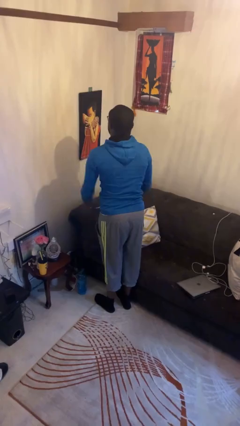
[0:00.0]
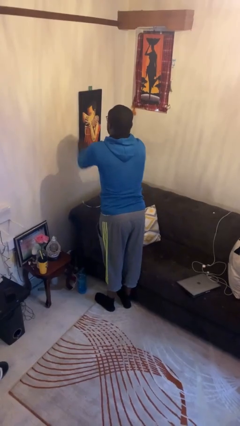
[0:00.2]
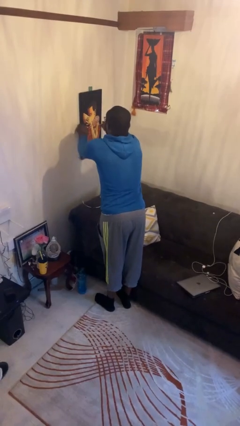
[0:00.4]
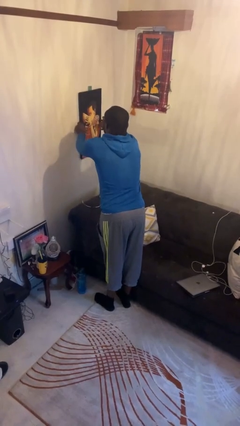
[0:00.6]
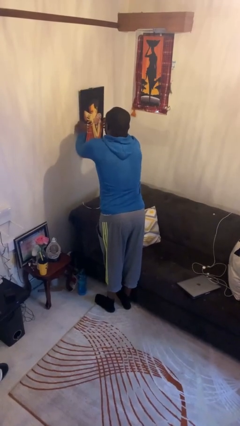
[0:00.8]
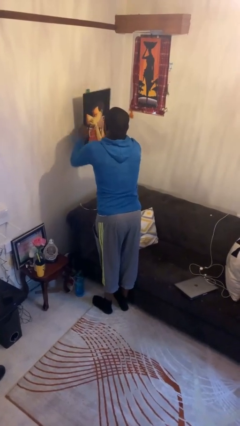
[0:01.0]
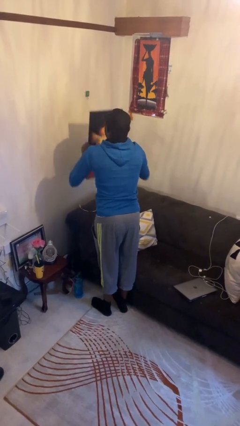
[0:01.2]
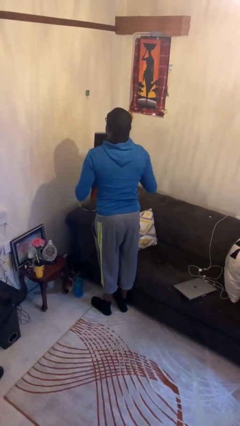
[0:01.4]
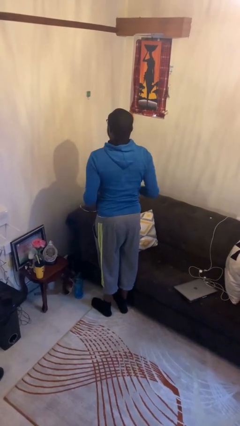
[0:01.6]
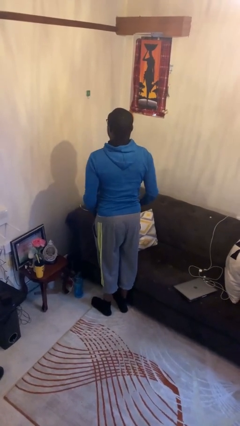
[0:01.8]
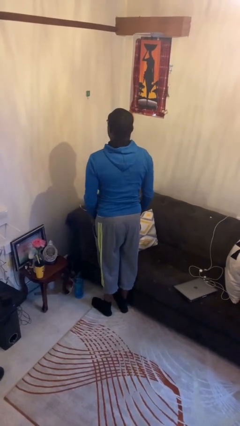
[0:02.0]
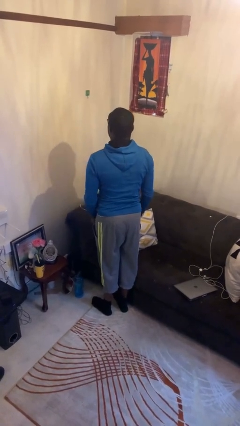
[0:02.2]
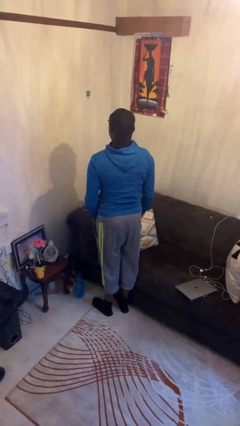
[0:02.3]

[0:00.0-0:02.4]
person takes down picture frame

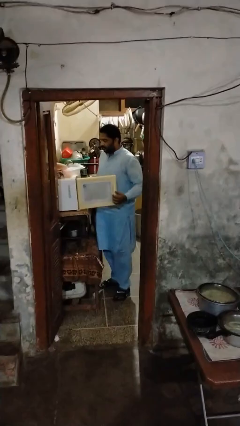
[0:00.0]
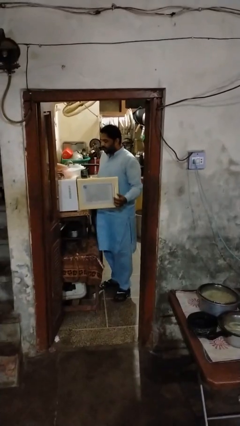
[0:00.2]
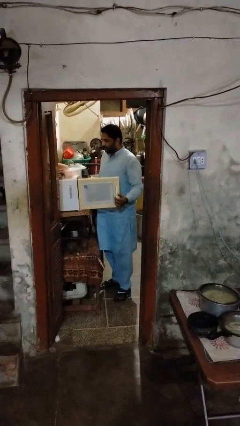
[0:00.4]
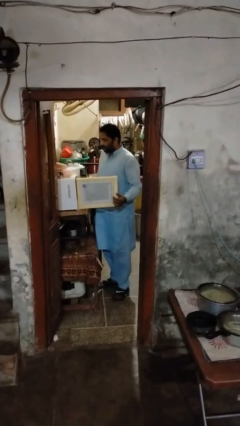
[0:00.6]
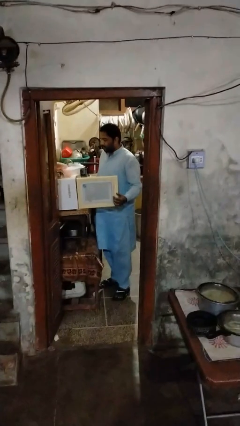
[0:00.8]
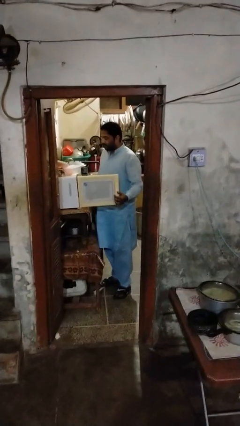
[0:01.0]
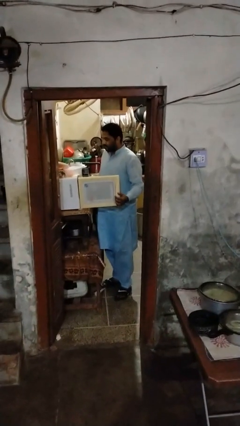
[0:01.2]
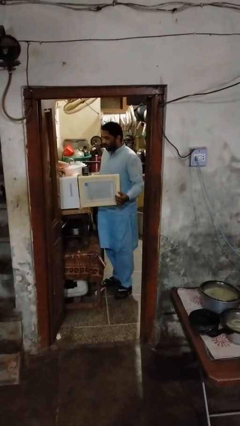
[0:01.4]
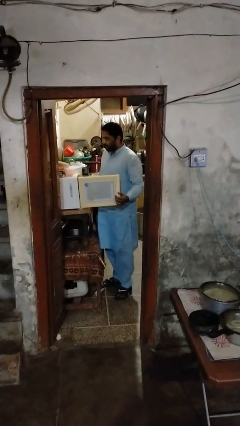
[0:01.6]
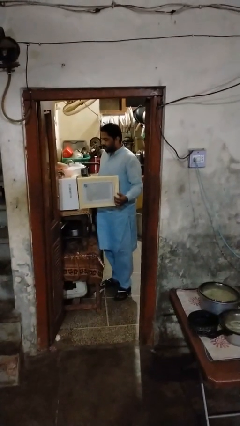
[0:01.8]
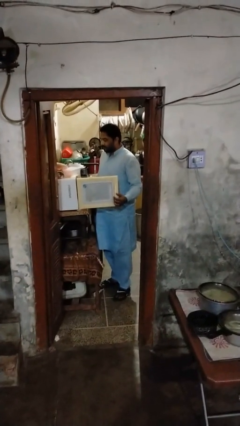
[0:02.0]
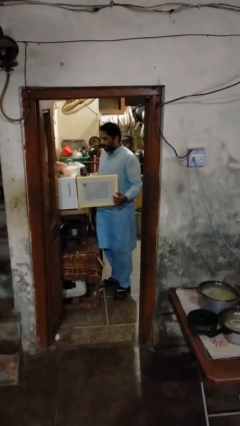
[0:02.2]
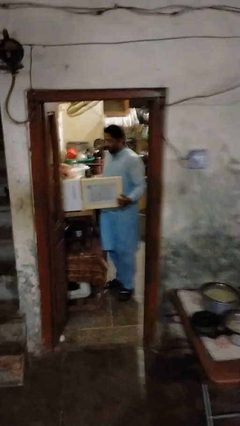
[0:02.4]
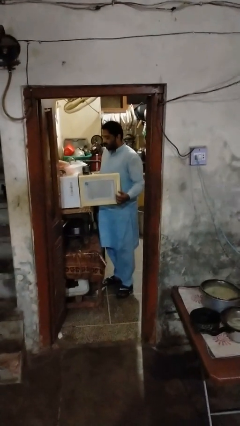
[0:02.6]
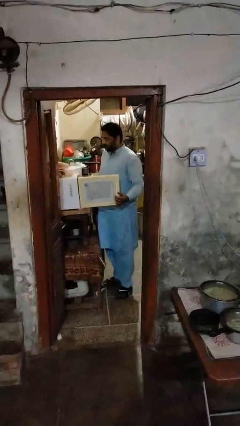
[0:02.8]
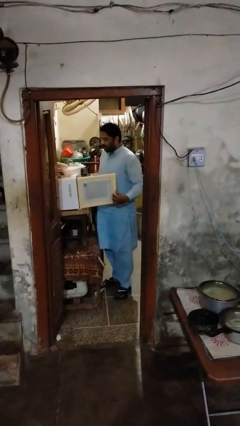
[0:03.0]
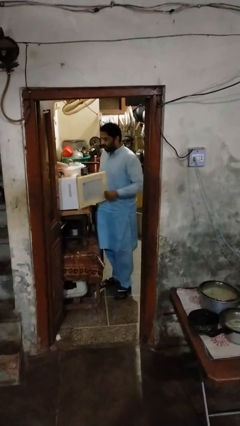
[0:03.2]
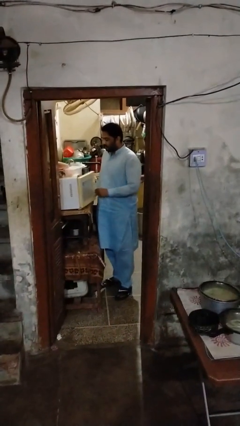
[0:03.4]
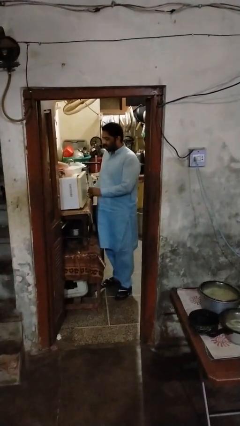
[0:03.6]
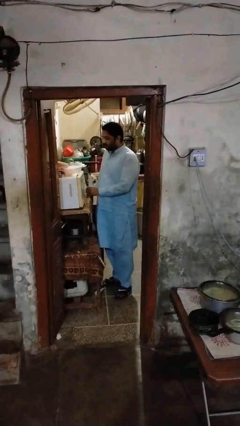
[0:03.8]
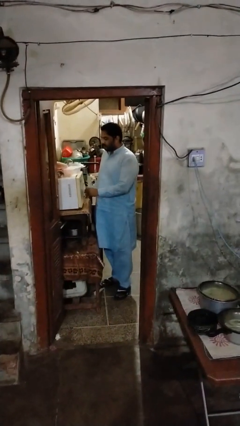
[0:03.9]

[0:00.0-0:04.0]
person falls from bed

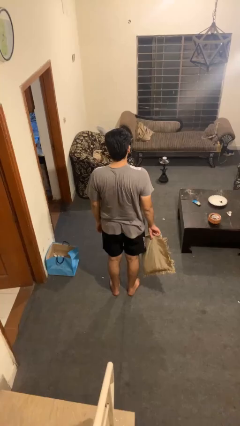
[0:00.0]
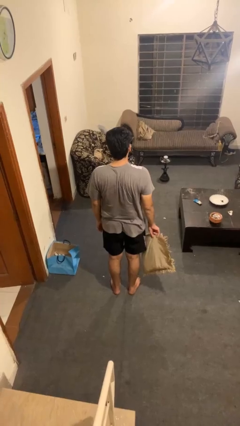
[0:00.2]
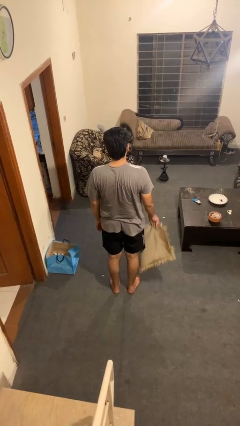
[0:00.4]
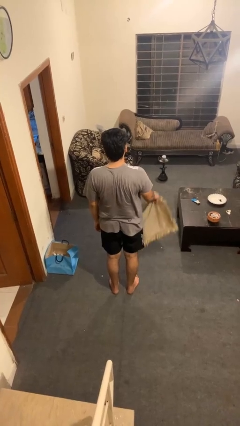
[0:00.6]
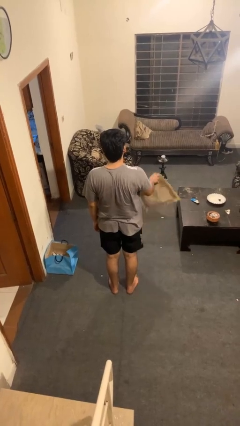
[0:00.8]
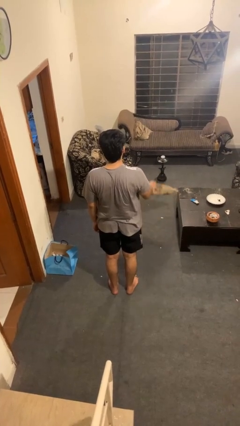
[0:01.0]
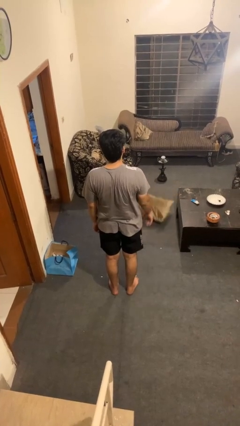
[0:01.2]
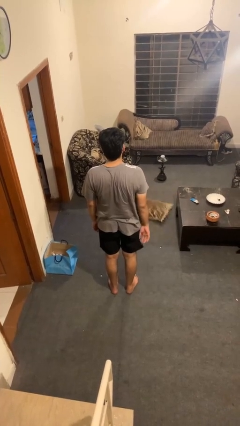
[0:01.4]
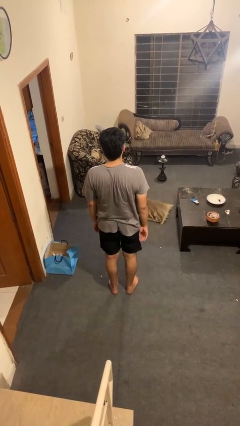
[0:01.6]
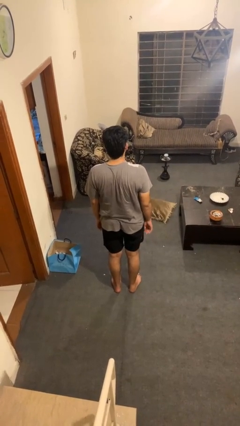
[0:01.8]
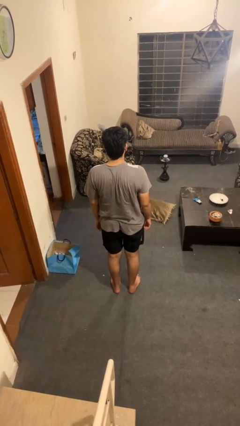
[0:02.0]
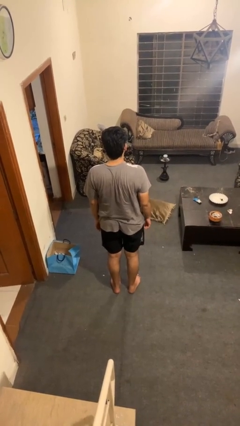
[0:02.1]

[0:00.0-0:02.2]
person throws object into air

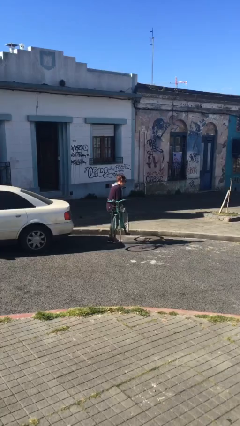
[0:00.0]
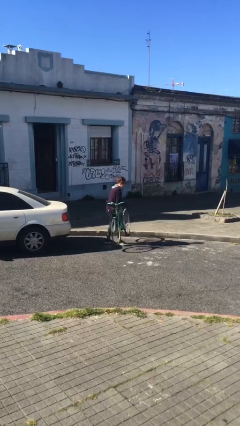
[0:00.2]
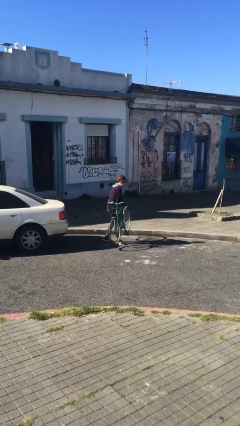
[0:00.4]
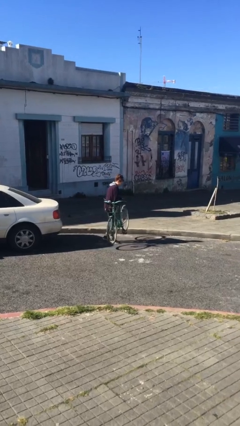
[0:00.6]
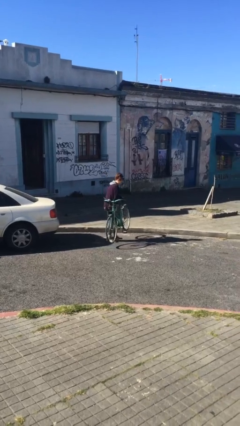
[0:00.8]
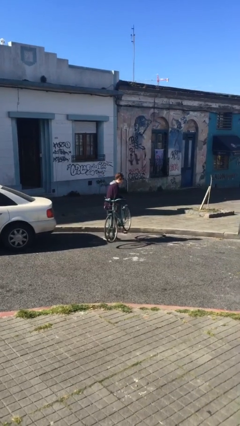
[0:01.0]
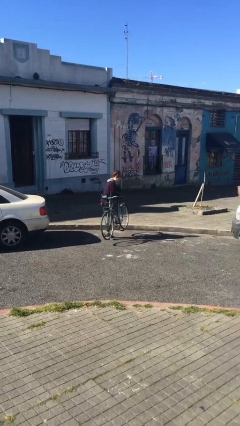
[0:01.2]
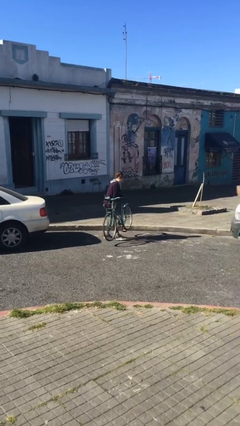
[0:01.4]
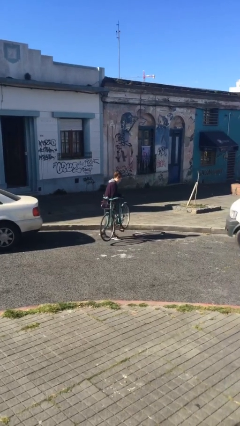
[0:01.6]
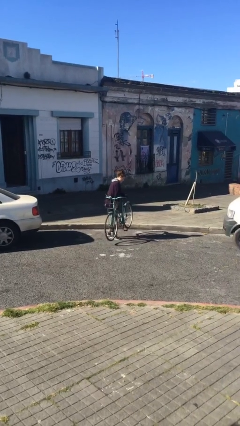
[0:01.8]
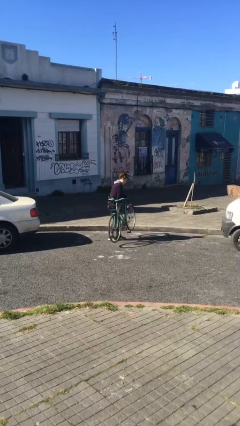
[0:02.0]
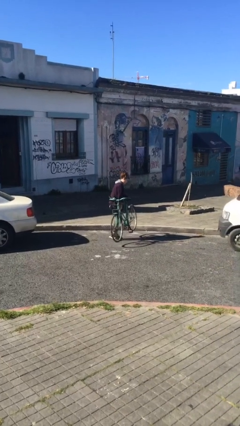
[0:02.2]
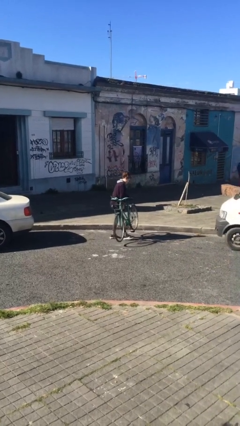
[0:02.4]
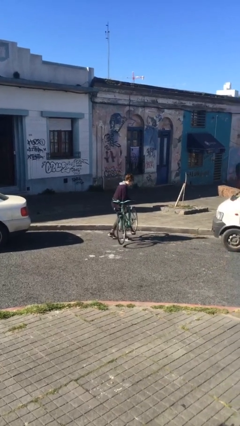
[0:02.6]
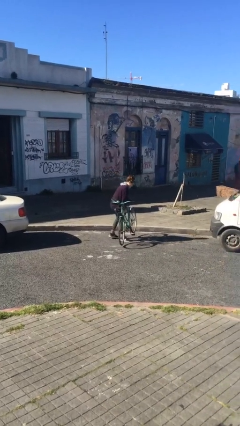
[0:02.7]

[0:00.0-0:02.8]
person carries heavy object

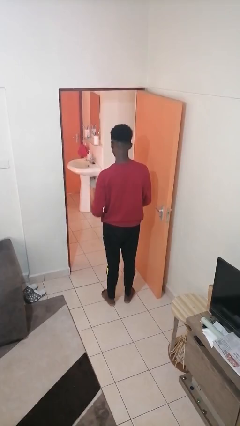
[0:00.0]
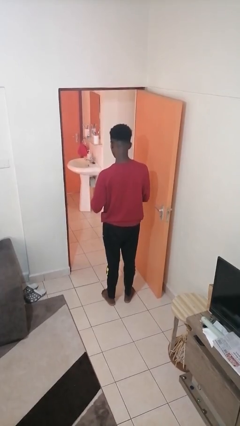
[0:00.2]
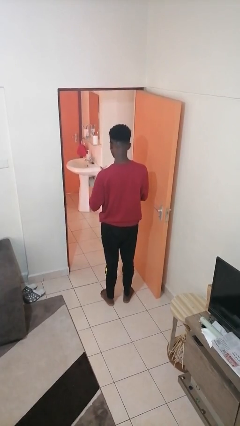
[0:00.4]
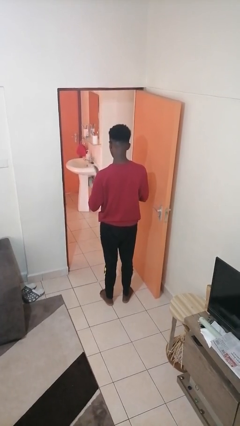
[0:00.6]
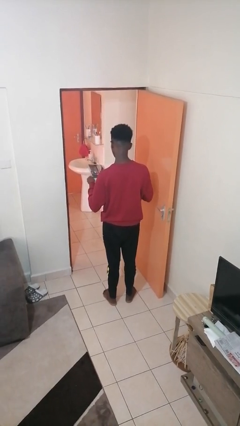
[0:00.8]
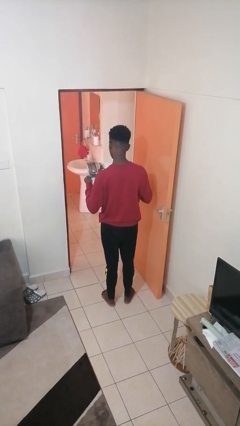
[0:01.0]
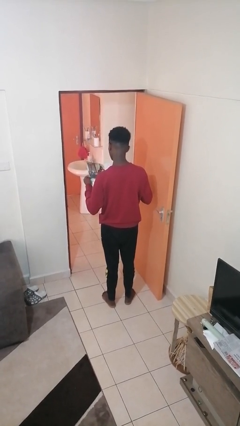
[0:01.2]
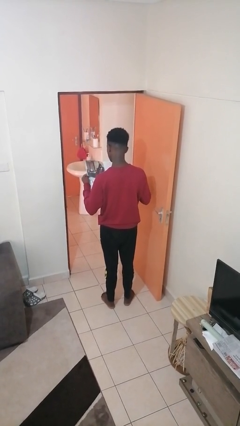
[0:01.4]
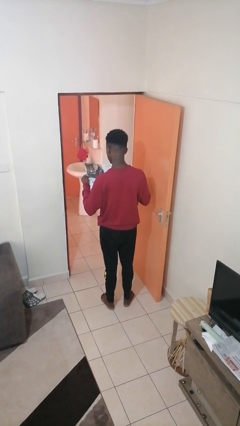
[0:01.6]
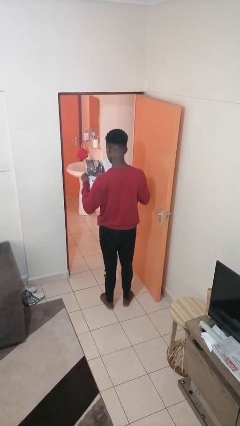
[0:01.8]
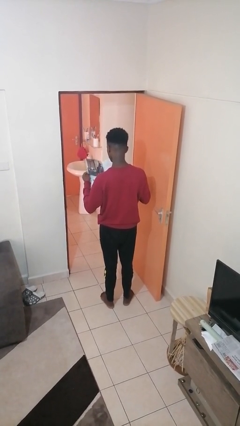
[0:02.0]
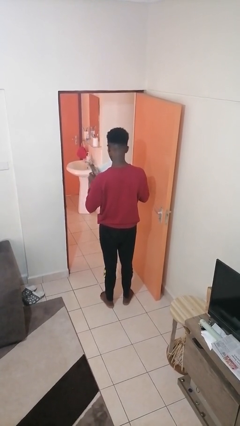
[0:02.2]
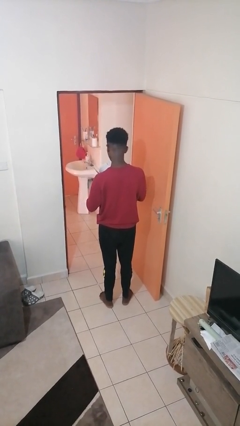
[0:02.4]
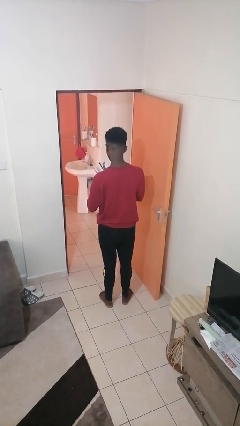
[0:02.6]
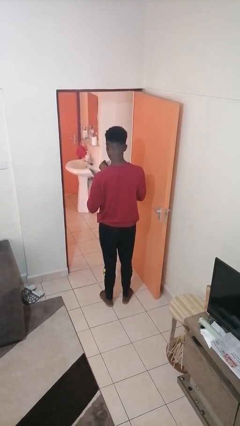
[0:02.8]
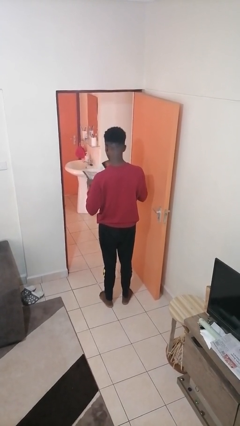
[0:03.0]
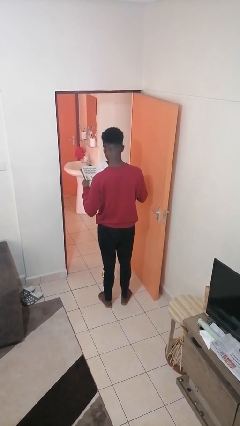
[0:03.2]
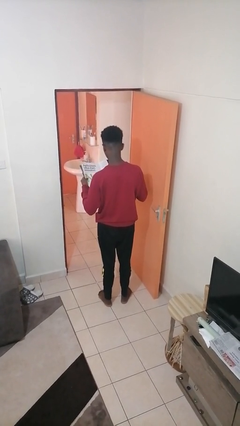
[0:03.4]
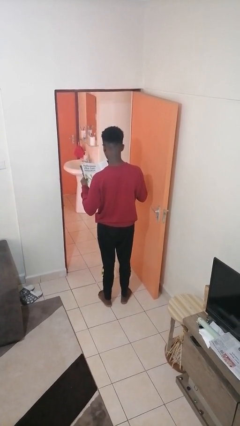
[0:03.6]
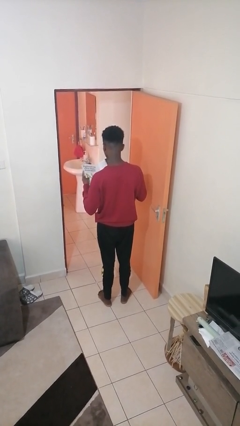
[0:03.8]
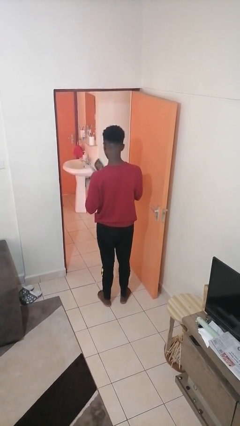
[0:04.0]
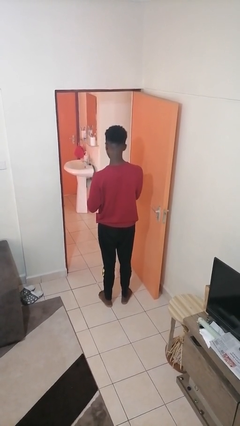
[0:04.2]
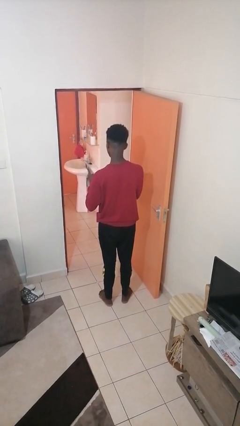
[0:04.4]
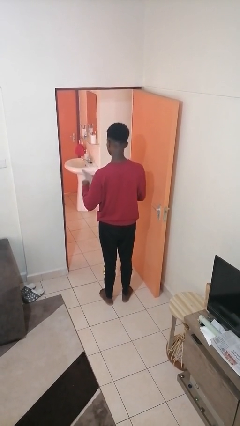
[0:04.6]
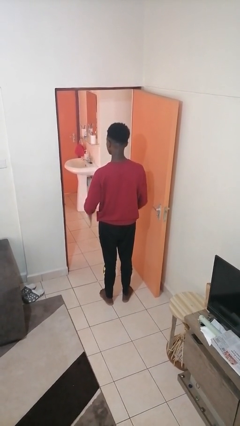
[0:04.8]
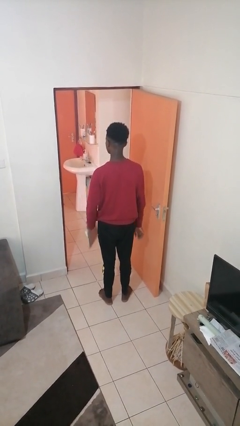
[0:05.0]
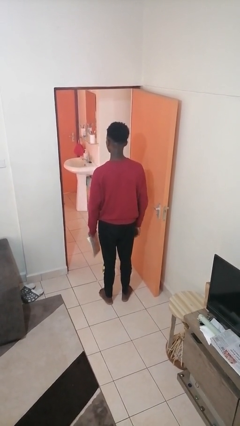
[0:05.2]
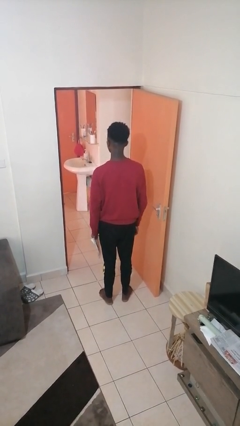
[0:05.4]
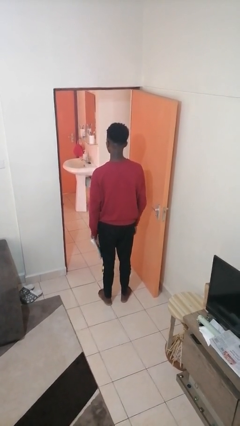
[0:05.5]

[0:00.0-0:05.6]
person reads magazine

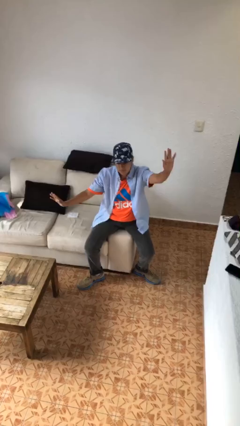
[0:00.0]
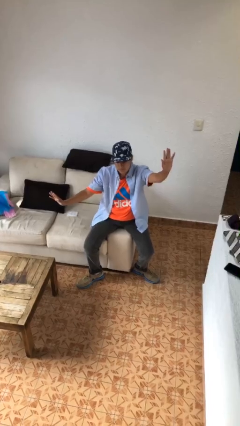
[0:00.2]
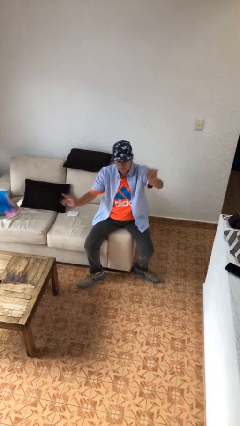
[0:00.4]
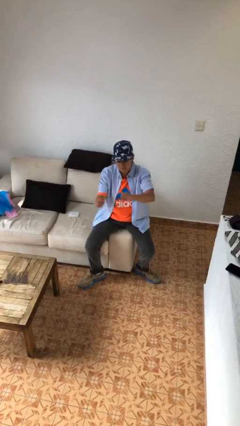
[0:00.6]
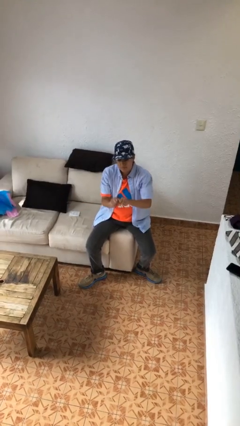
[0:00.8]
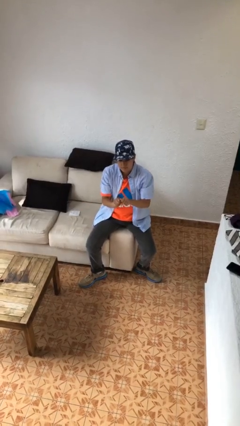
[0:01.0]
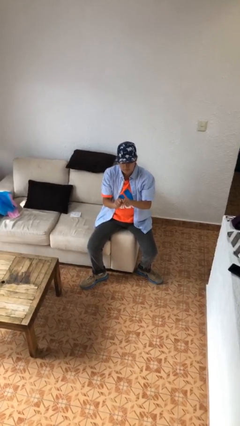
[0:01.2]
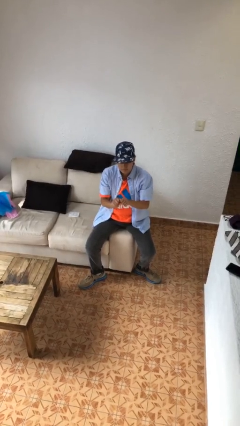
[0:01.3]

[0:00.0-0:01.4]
person gestures zoom out
